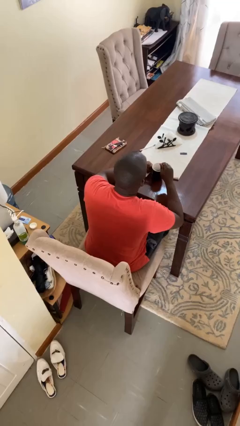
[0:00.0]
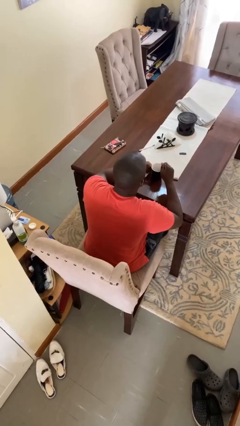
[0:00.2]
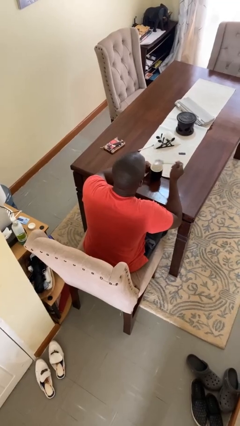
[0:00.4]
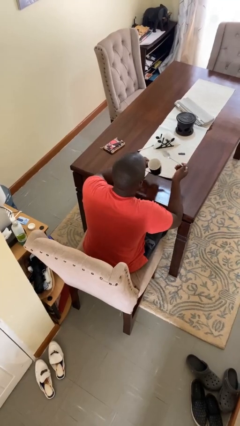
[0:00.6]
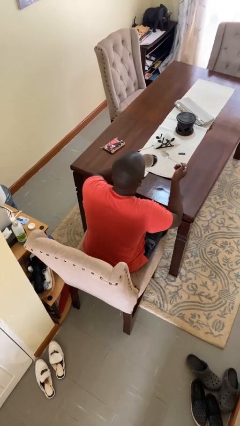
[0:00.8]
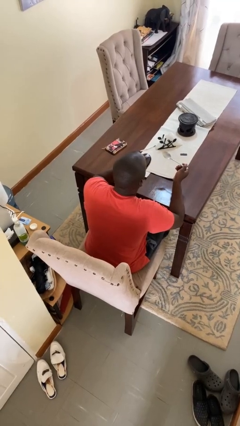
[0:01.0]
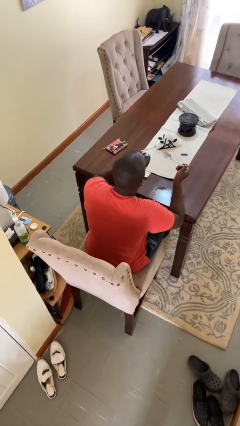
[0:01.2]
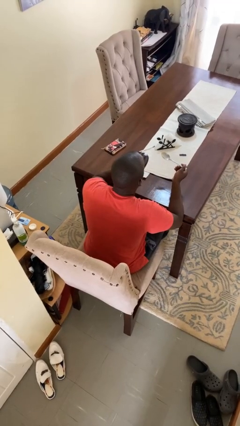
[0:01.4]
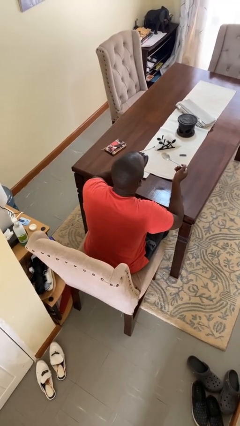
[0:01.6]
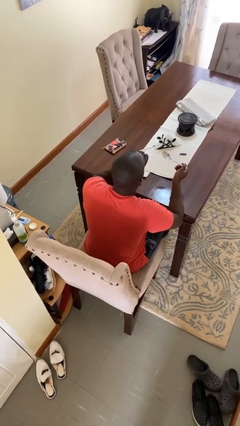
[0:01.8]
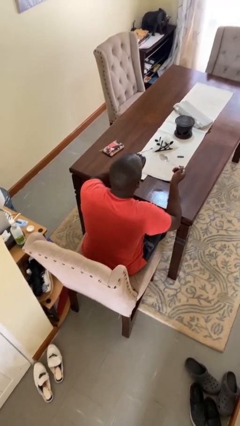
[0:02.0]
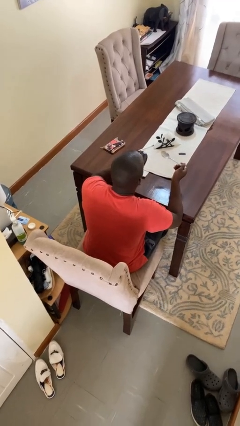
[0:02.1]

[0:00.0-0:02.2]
person drinks from mug

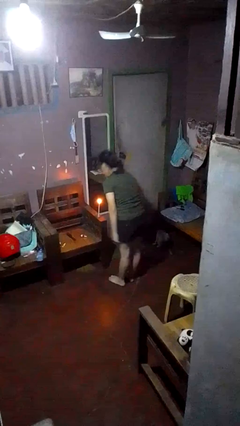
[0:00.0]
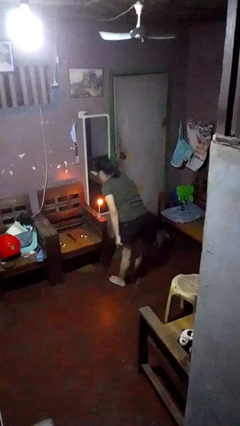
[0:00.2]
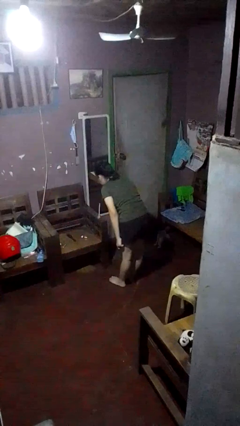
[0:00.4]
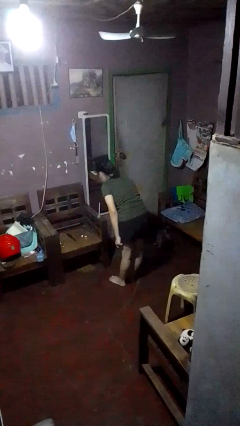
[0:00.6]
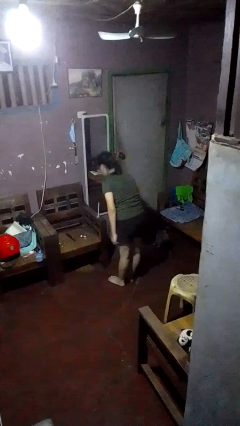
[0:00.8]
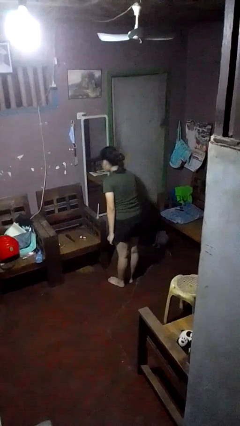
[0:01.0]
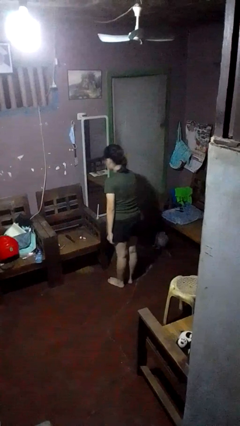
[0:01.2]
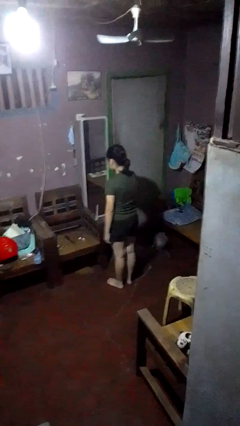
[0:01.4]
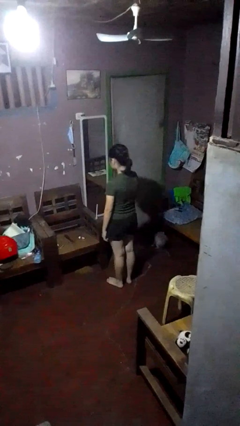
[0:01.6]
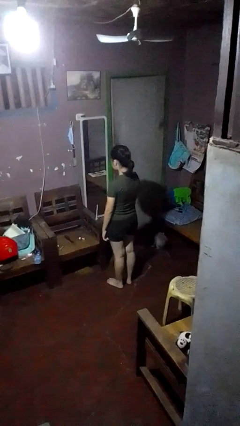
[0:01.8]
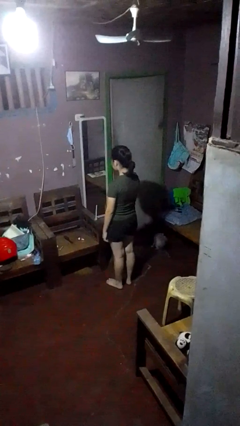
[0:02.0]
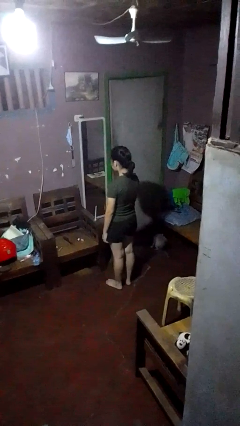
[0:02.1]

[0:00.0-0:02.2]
person extinguishes candle

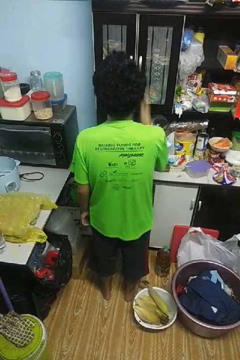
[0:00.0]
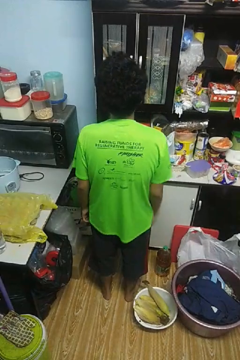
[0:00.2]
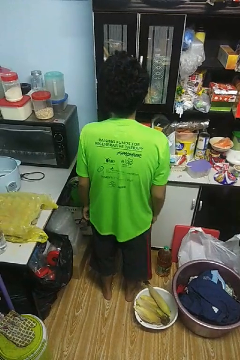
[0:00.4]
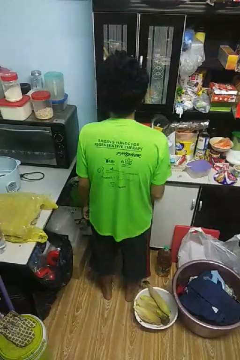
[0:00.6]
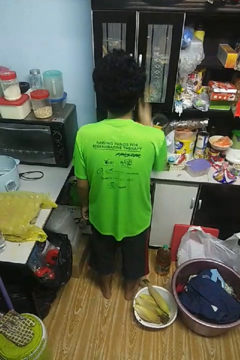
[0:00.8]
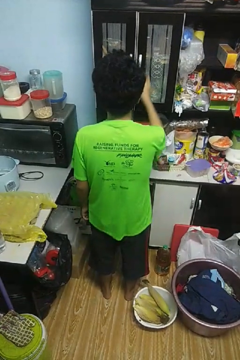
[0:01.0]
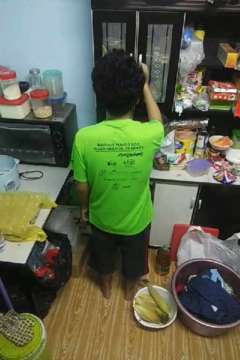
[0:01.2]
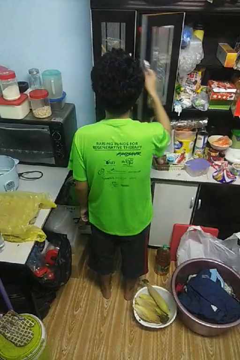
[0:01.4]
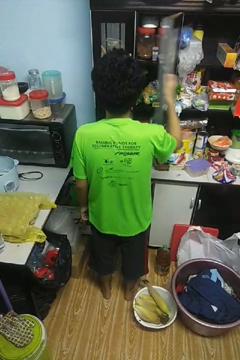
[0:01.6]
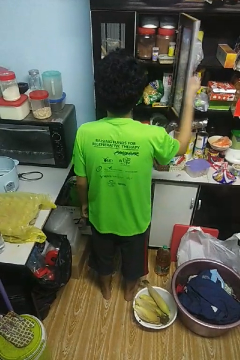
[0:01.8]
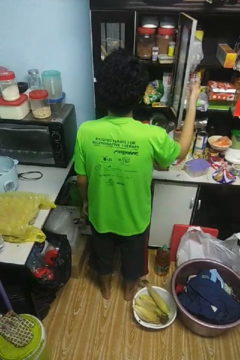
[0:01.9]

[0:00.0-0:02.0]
person opens cabinet

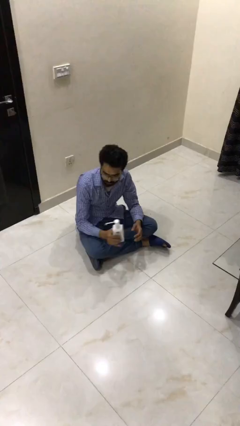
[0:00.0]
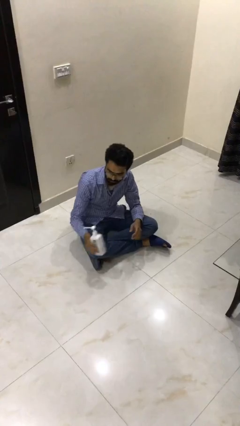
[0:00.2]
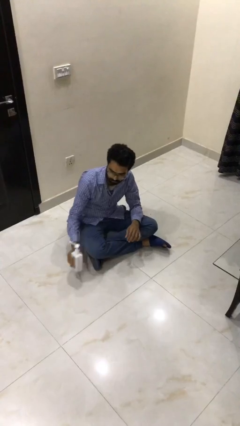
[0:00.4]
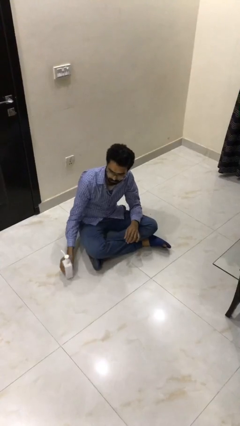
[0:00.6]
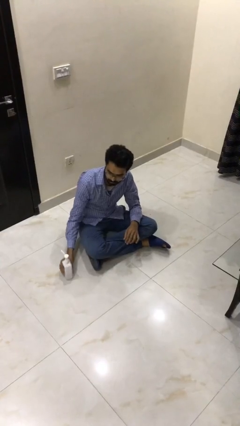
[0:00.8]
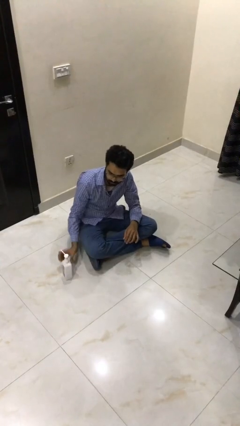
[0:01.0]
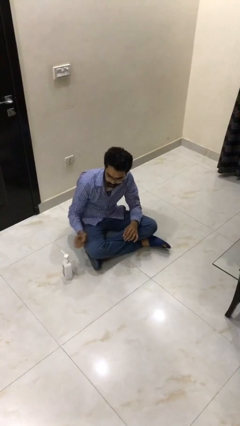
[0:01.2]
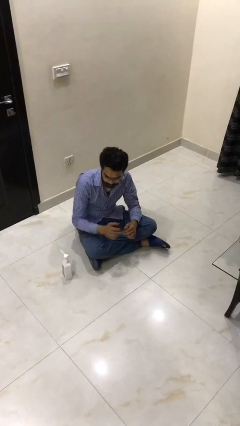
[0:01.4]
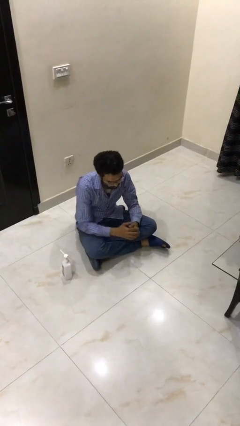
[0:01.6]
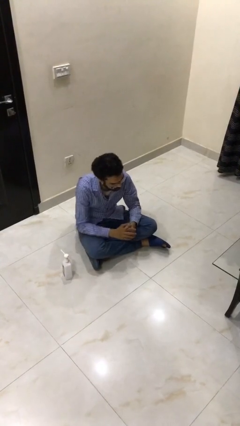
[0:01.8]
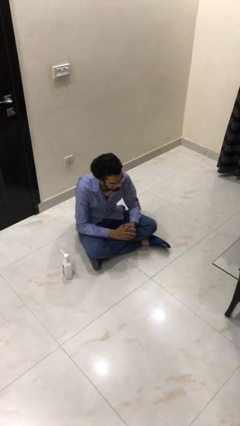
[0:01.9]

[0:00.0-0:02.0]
person puts down object on floor

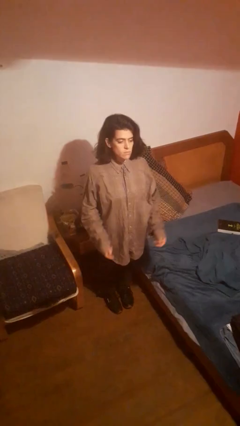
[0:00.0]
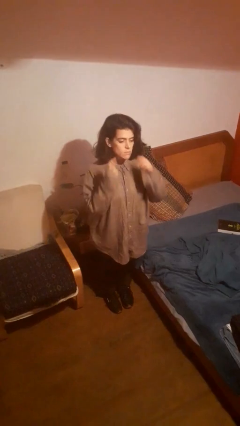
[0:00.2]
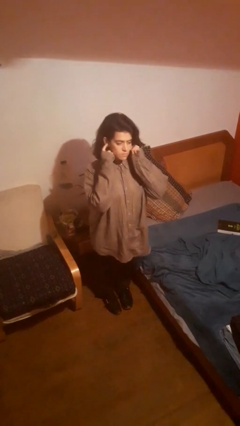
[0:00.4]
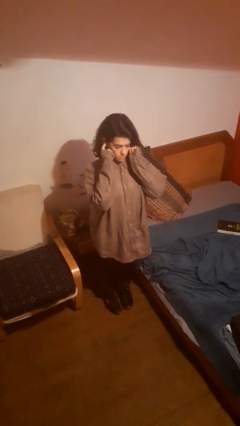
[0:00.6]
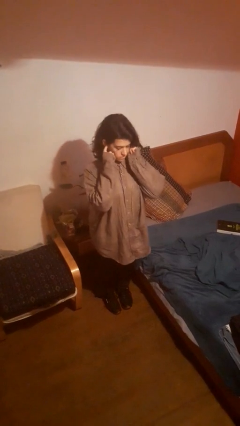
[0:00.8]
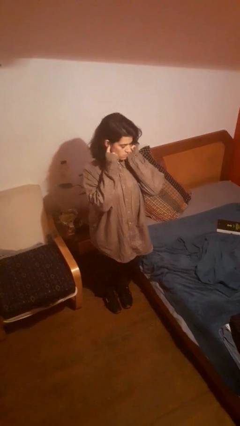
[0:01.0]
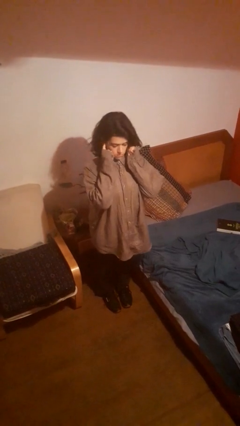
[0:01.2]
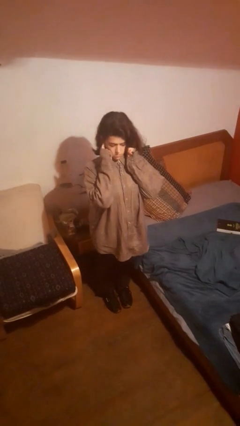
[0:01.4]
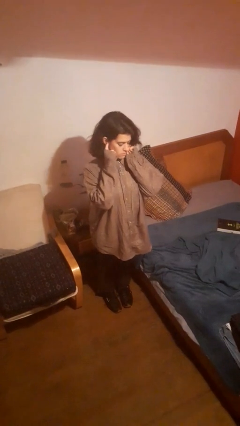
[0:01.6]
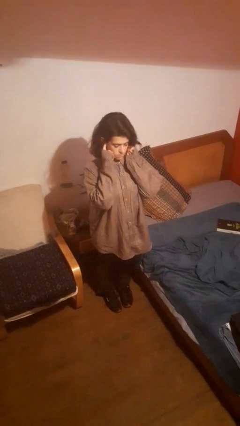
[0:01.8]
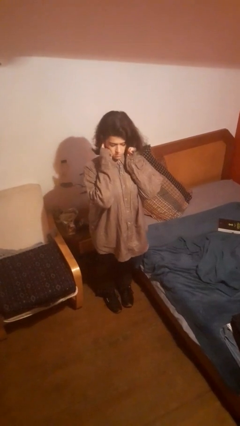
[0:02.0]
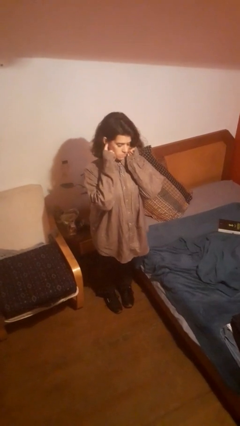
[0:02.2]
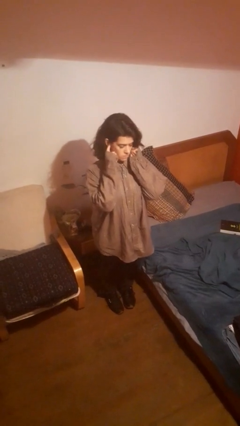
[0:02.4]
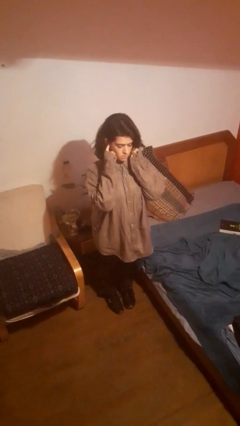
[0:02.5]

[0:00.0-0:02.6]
person puts fingers in ear

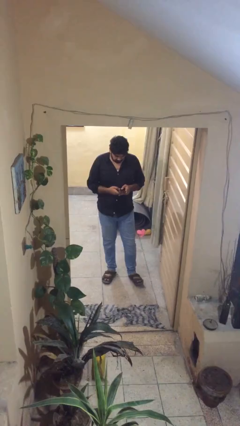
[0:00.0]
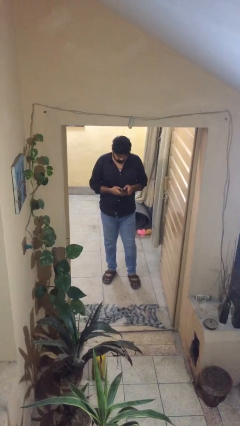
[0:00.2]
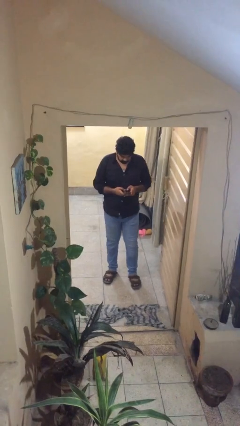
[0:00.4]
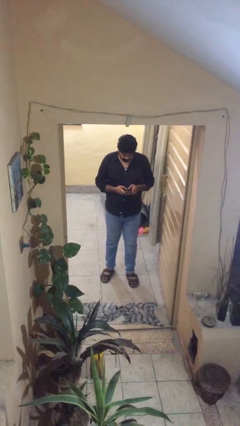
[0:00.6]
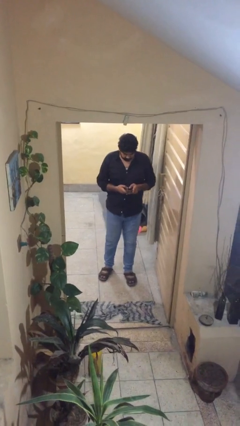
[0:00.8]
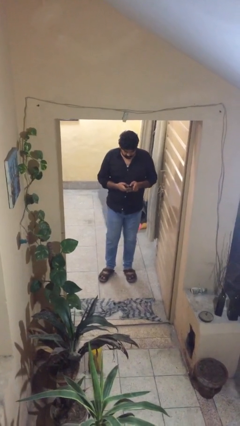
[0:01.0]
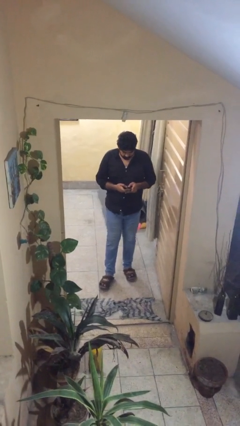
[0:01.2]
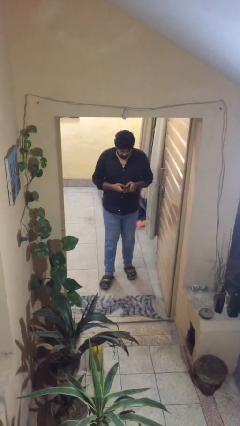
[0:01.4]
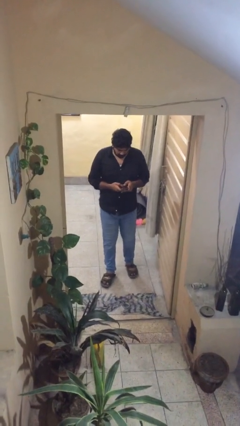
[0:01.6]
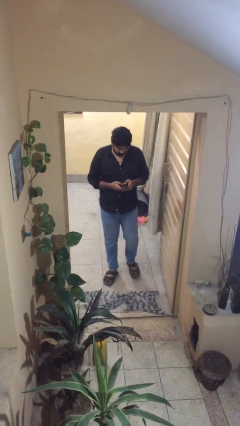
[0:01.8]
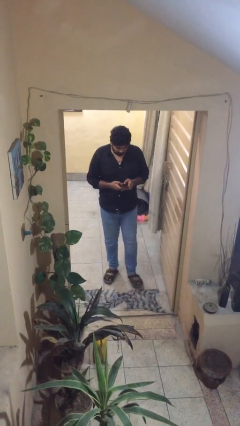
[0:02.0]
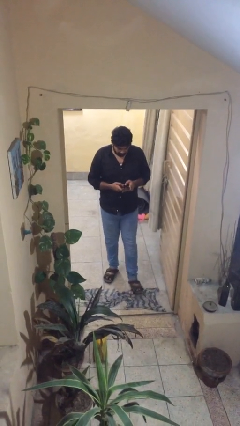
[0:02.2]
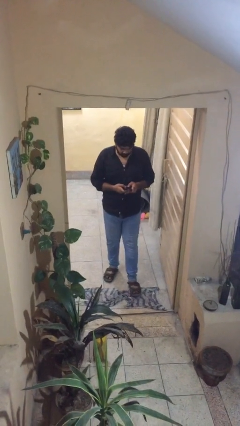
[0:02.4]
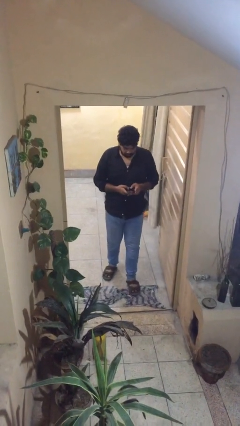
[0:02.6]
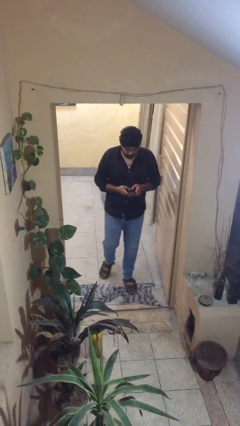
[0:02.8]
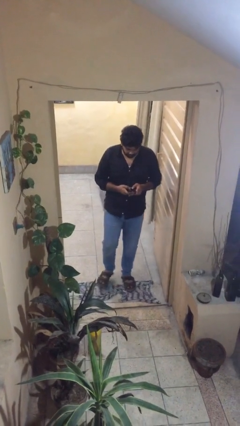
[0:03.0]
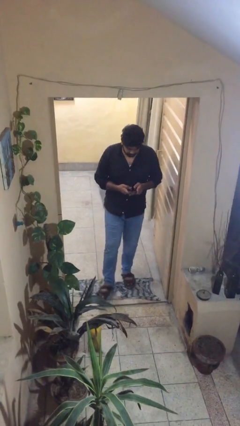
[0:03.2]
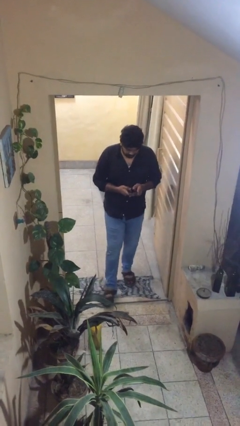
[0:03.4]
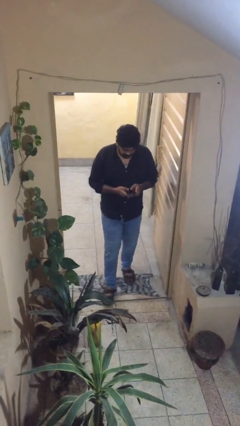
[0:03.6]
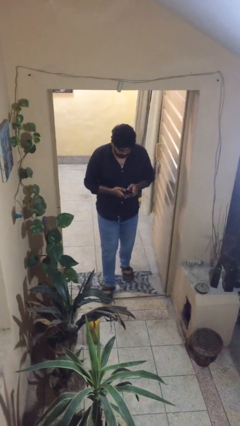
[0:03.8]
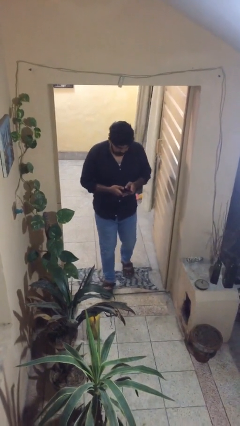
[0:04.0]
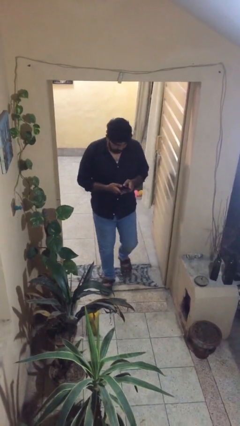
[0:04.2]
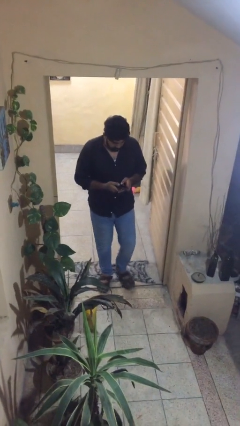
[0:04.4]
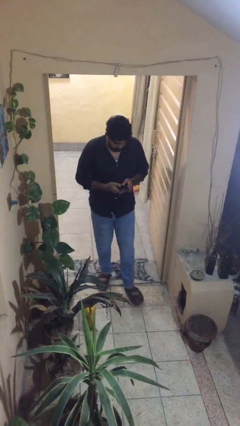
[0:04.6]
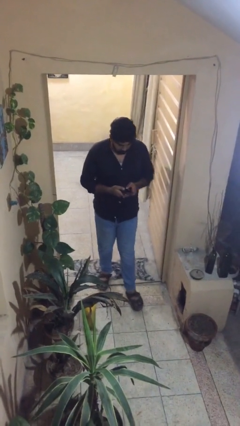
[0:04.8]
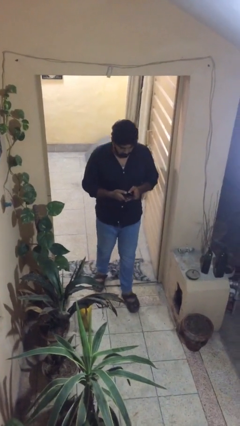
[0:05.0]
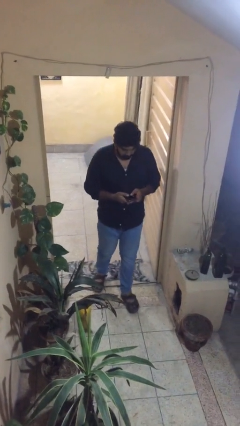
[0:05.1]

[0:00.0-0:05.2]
person texts on phone

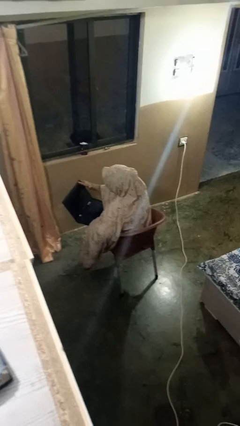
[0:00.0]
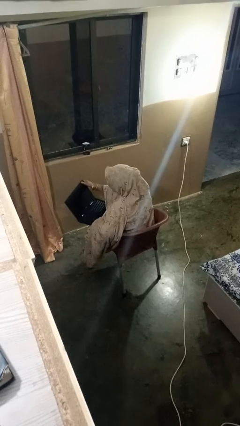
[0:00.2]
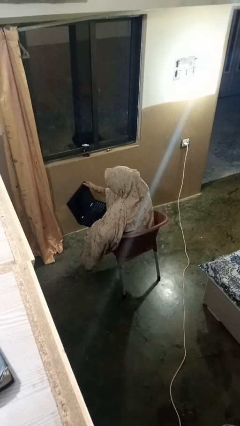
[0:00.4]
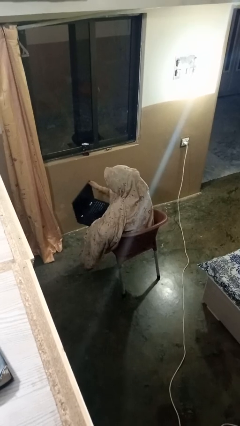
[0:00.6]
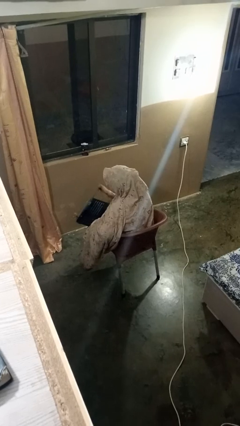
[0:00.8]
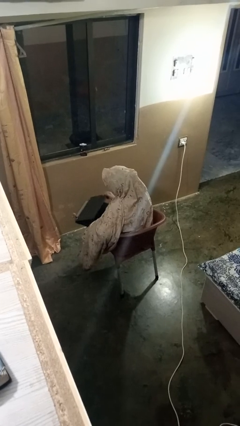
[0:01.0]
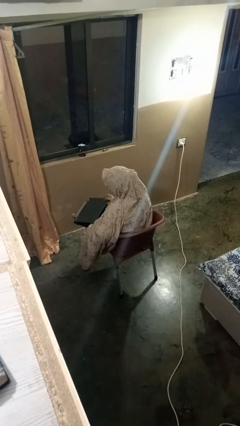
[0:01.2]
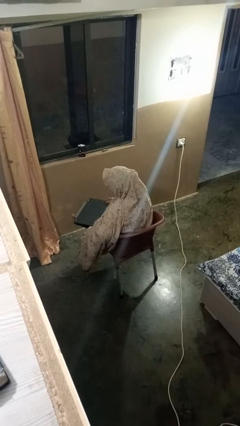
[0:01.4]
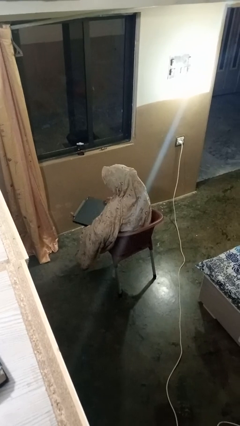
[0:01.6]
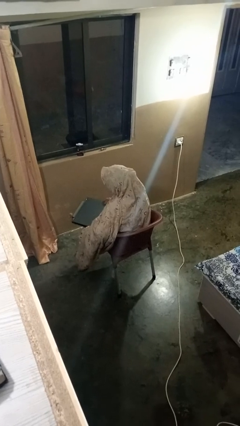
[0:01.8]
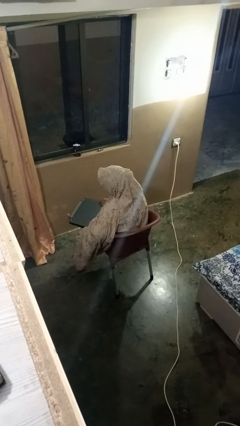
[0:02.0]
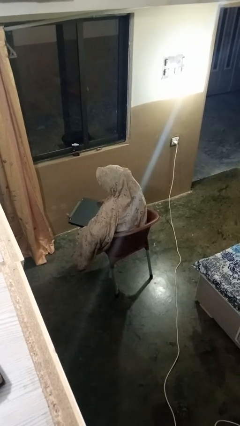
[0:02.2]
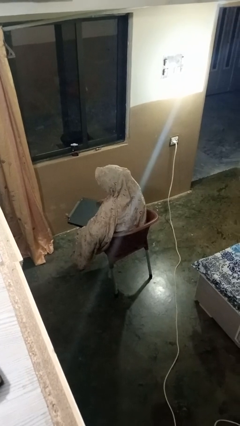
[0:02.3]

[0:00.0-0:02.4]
person closes laptop